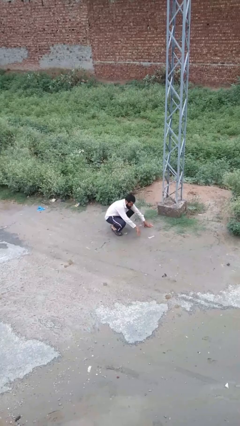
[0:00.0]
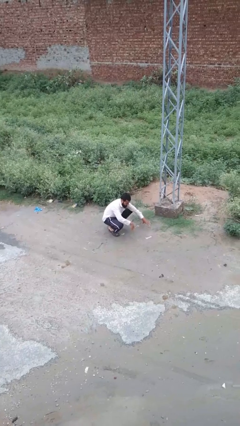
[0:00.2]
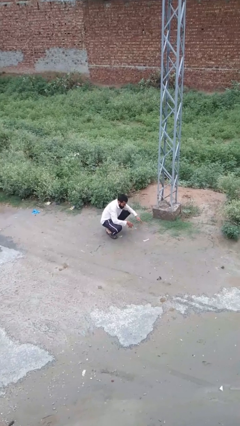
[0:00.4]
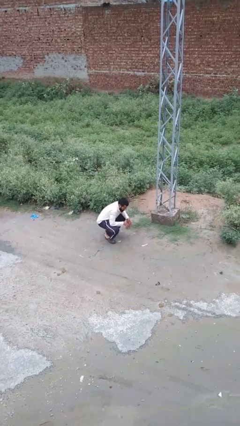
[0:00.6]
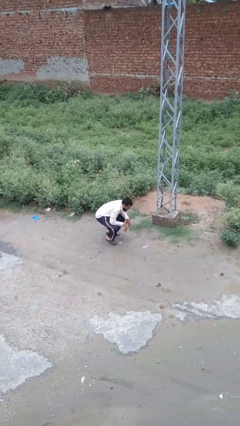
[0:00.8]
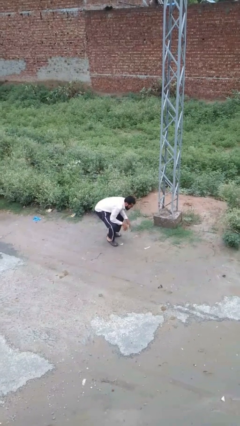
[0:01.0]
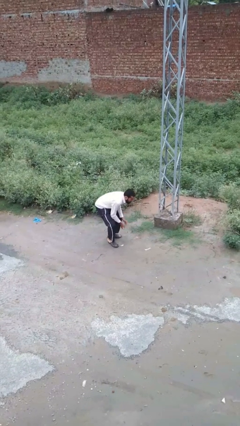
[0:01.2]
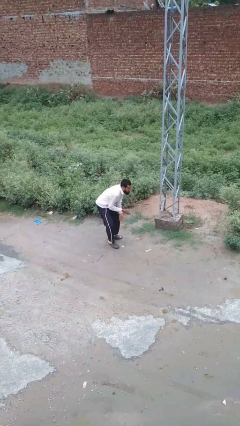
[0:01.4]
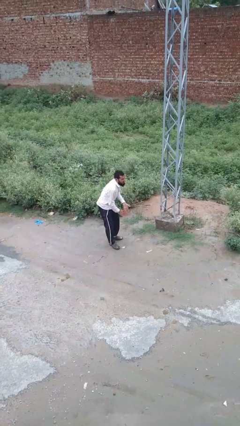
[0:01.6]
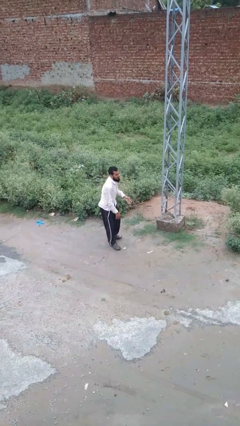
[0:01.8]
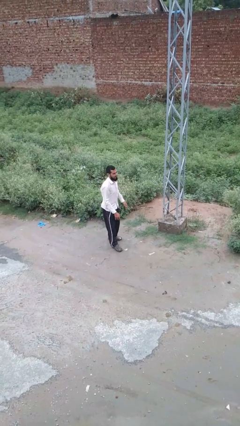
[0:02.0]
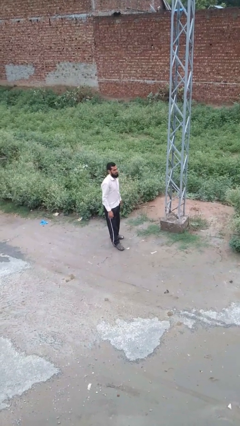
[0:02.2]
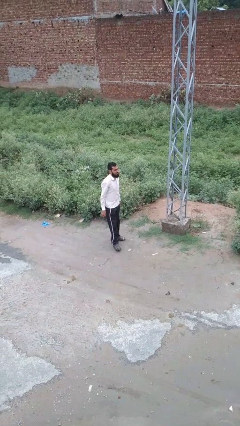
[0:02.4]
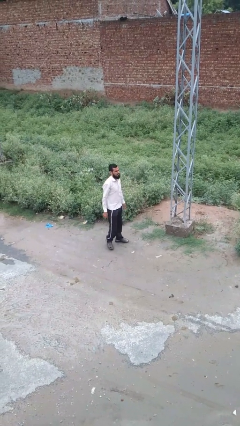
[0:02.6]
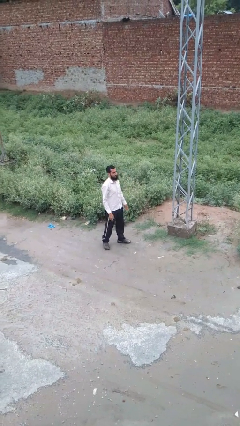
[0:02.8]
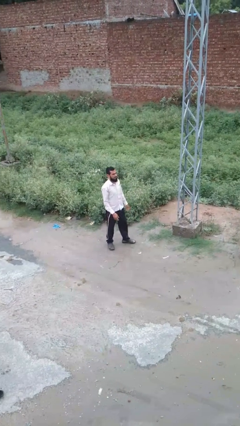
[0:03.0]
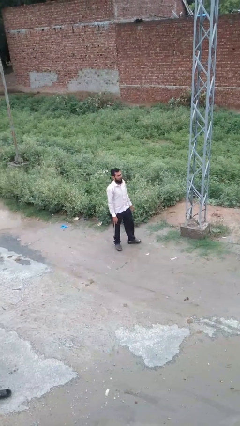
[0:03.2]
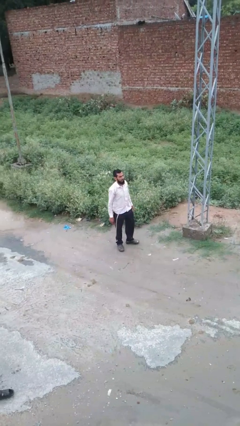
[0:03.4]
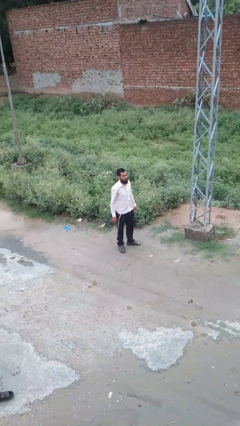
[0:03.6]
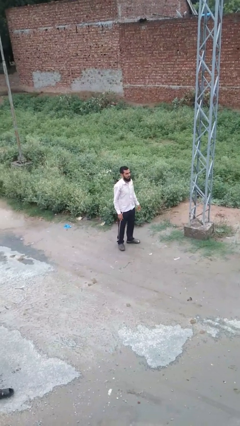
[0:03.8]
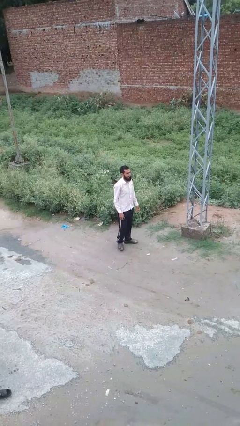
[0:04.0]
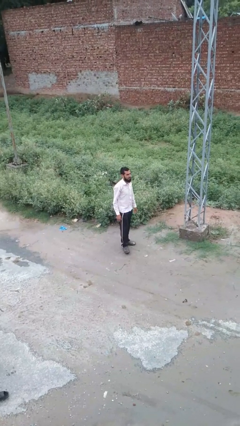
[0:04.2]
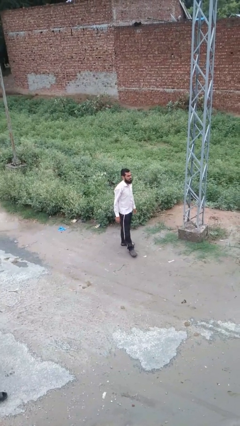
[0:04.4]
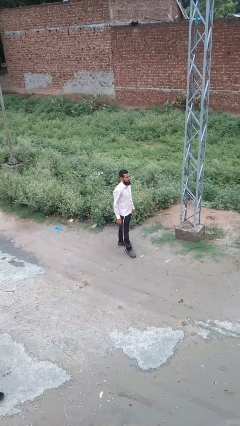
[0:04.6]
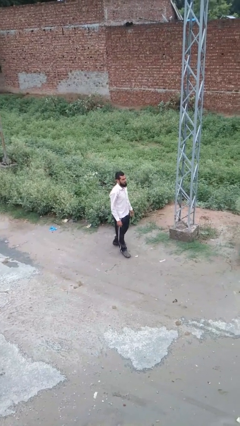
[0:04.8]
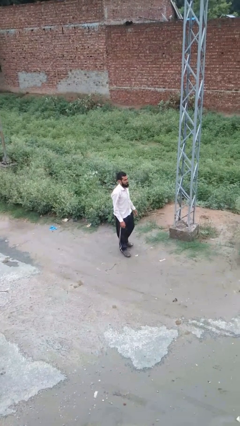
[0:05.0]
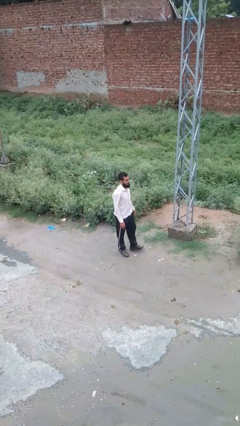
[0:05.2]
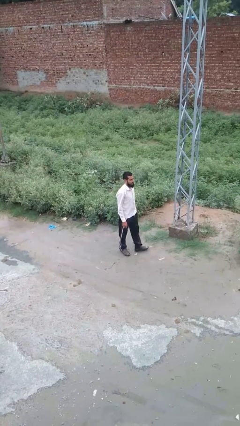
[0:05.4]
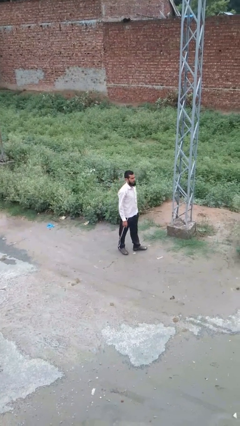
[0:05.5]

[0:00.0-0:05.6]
person stands up from floor

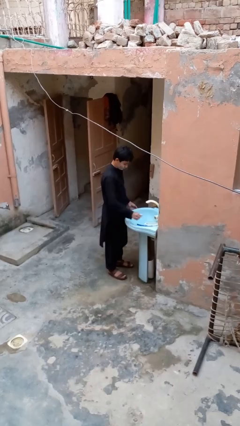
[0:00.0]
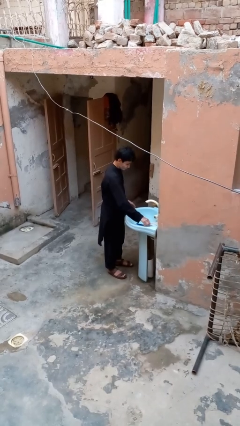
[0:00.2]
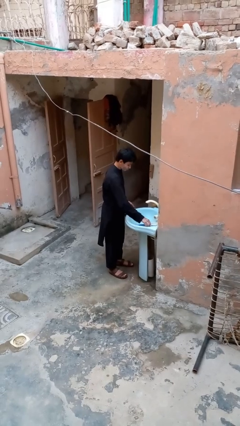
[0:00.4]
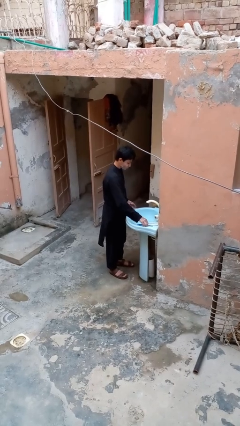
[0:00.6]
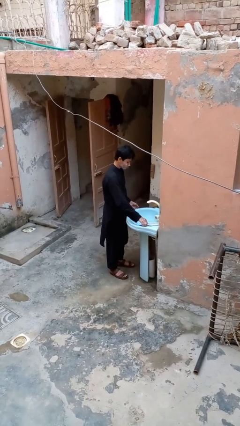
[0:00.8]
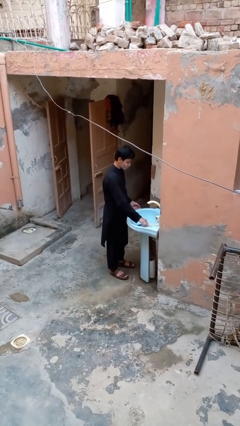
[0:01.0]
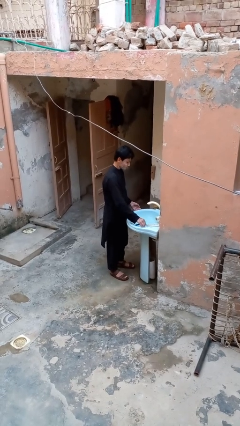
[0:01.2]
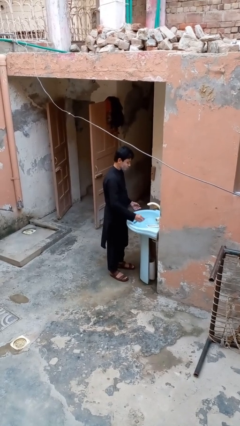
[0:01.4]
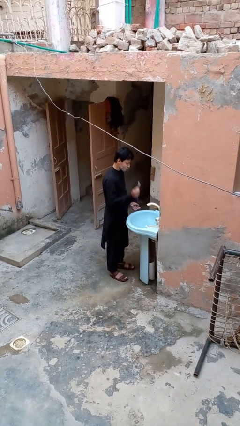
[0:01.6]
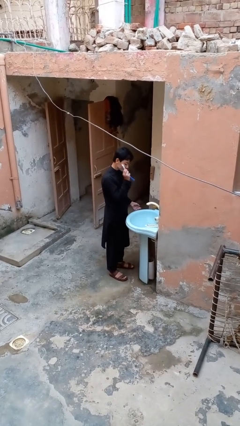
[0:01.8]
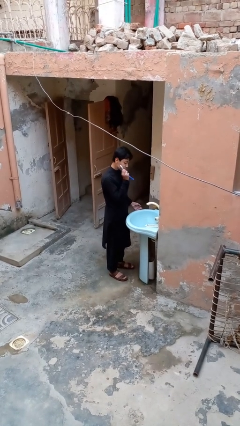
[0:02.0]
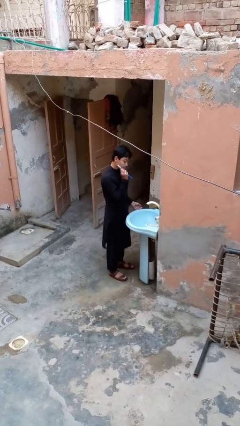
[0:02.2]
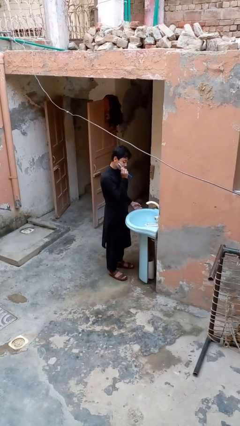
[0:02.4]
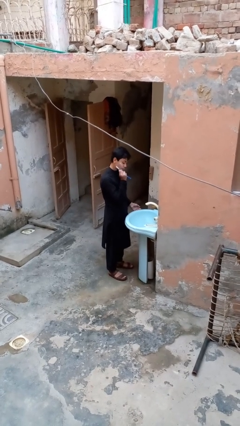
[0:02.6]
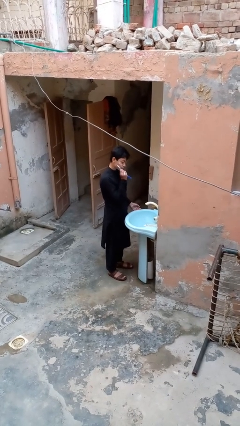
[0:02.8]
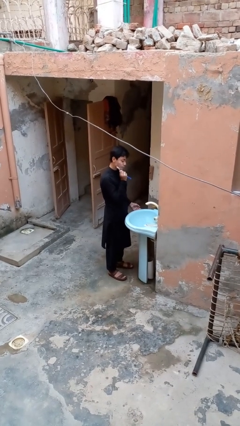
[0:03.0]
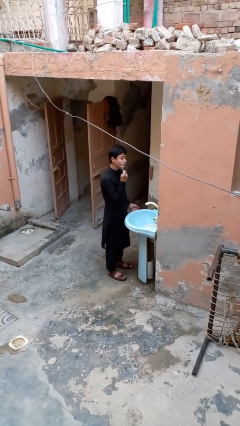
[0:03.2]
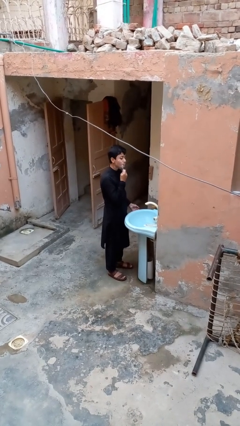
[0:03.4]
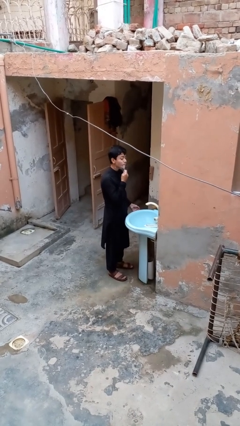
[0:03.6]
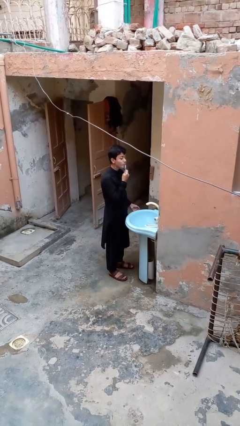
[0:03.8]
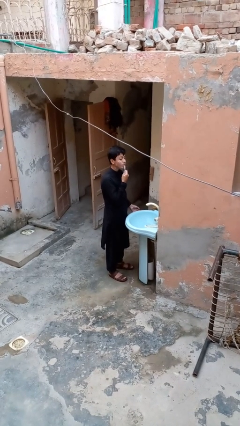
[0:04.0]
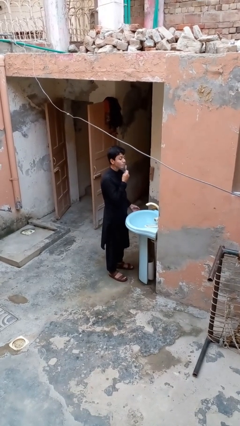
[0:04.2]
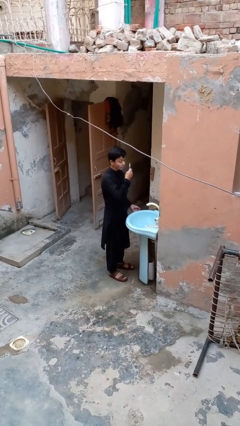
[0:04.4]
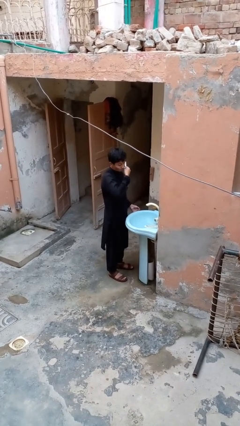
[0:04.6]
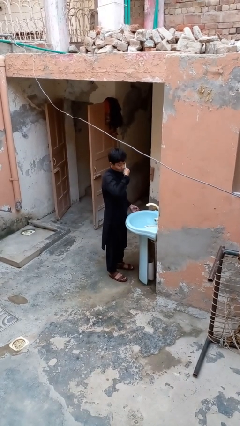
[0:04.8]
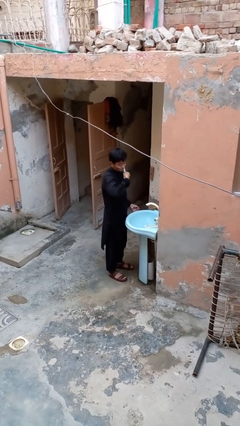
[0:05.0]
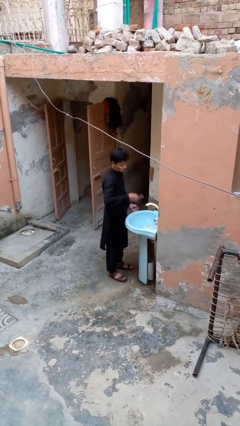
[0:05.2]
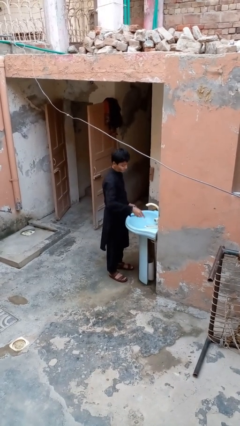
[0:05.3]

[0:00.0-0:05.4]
person shaves face

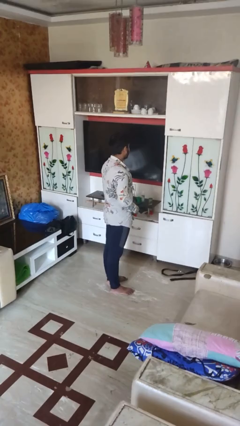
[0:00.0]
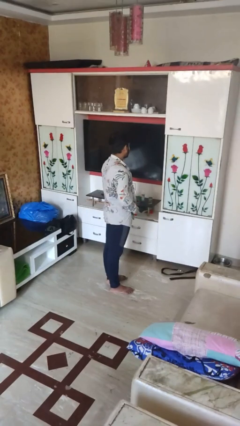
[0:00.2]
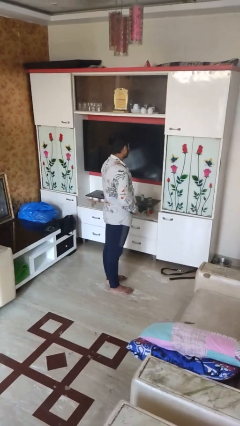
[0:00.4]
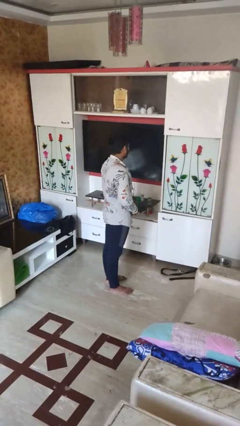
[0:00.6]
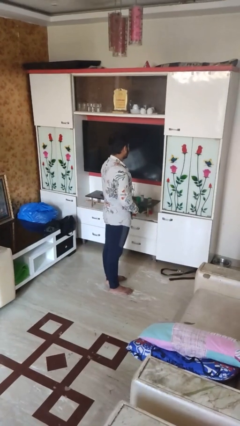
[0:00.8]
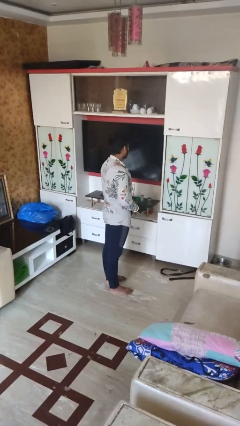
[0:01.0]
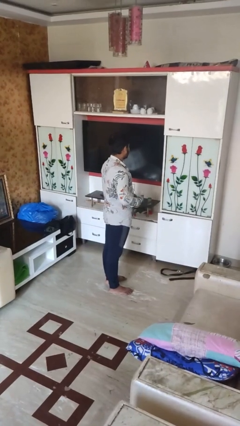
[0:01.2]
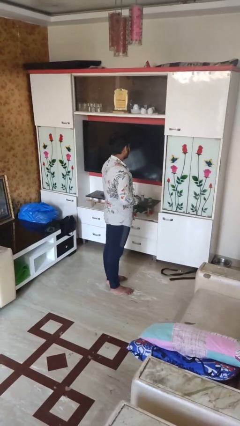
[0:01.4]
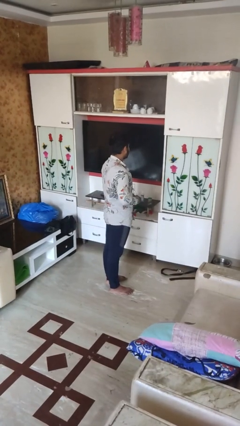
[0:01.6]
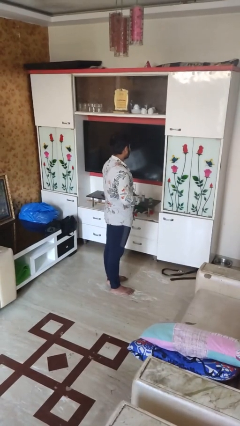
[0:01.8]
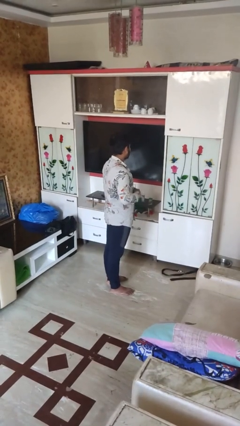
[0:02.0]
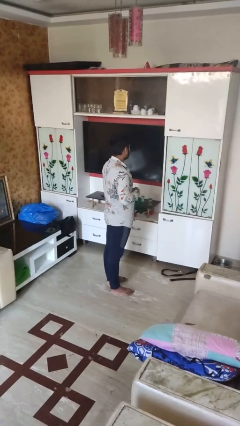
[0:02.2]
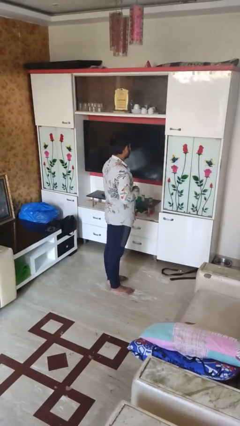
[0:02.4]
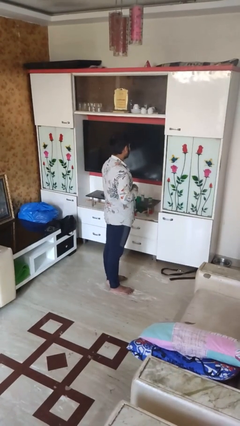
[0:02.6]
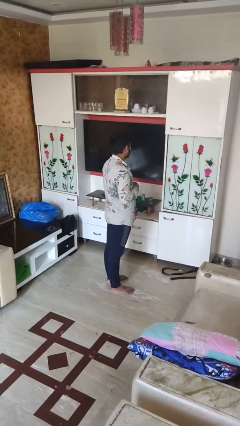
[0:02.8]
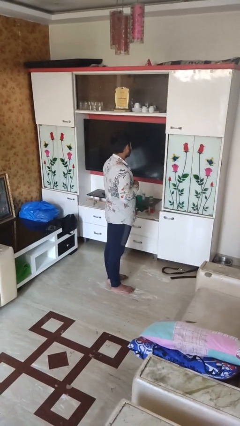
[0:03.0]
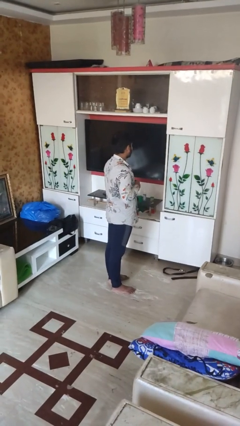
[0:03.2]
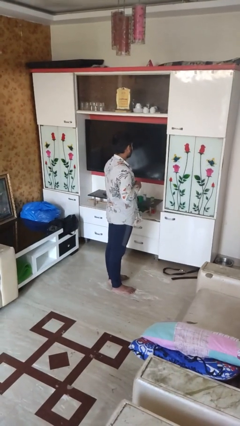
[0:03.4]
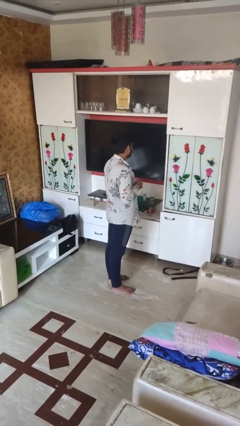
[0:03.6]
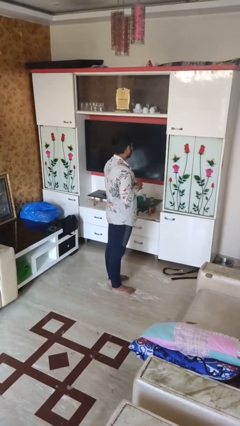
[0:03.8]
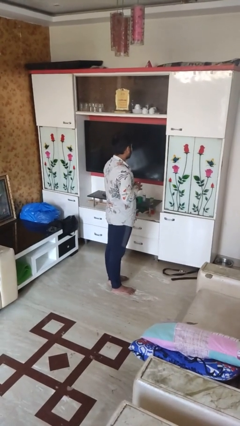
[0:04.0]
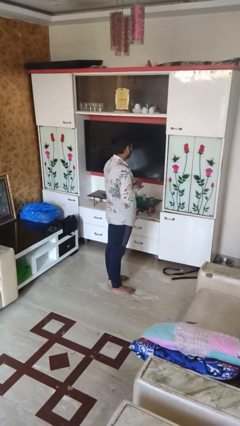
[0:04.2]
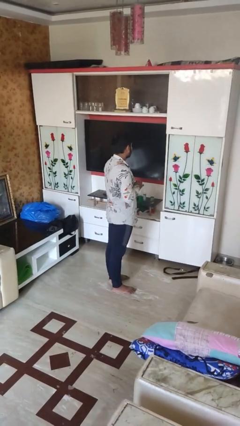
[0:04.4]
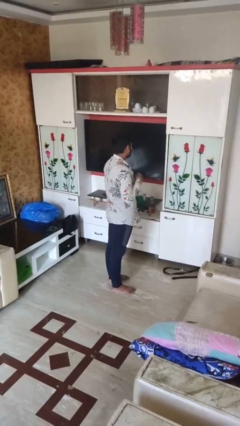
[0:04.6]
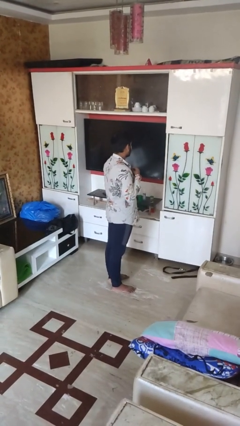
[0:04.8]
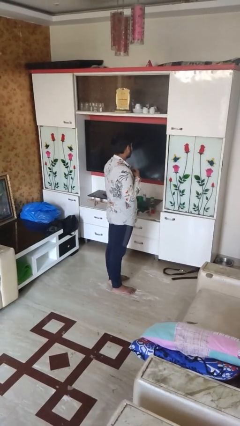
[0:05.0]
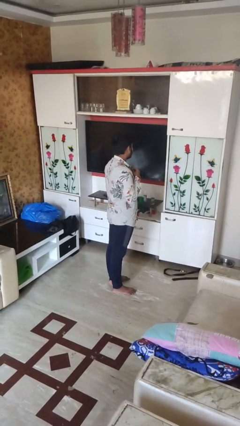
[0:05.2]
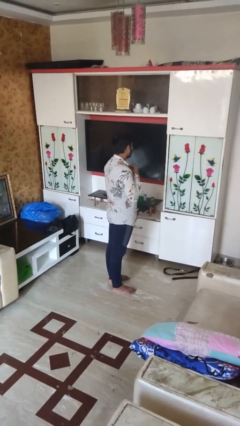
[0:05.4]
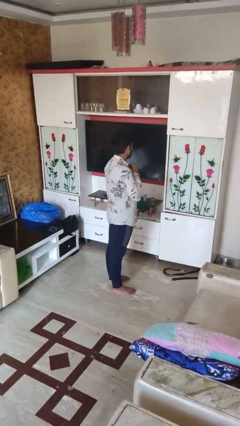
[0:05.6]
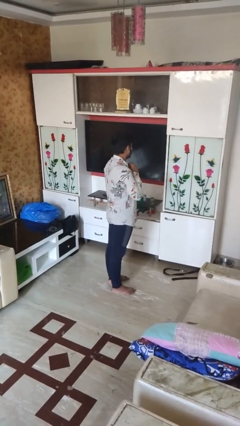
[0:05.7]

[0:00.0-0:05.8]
person buttons shirt

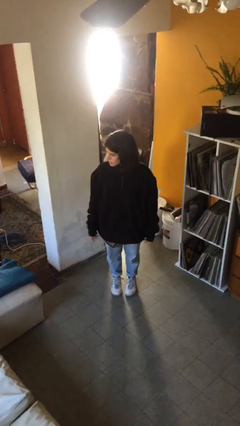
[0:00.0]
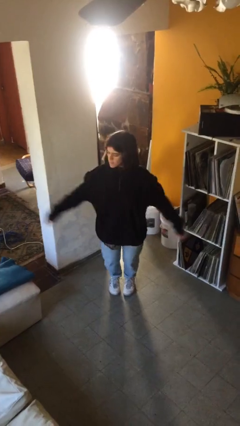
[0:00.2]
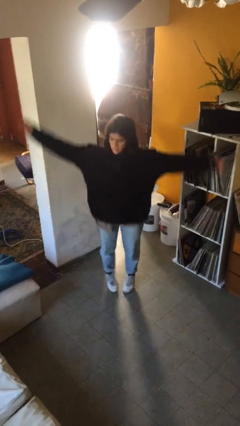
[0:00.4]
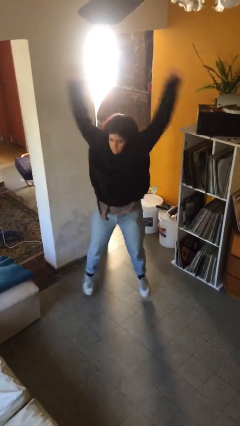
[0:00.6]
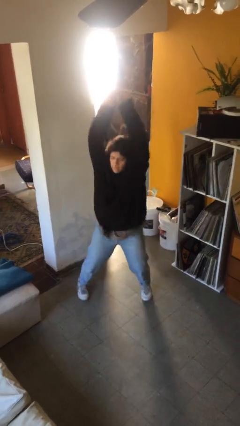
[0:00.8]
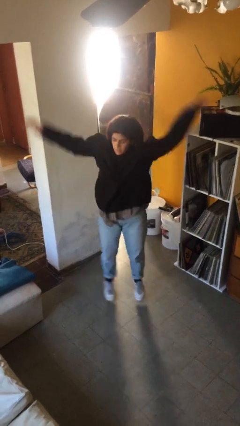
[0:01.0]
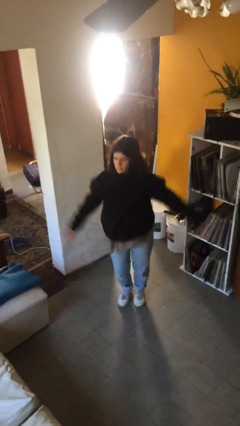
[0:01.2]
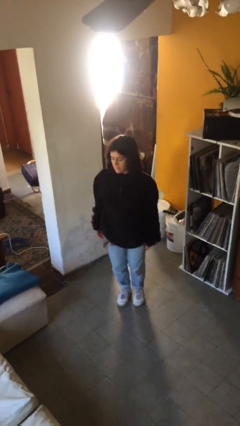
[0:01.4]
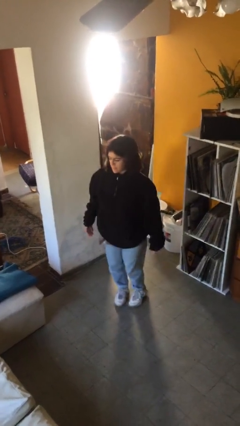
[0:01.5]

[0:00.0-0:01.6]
person exercises with jumping jacks
